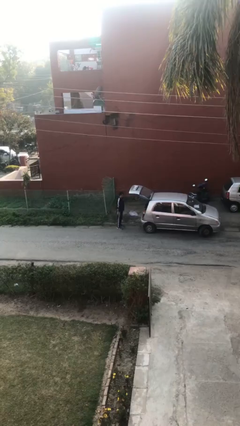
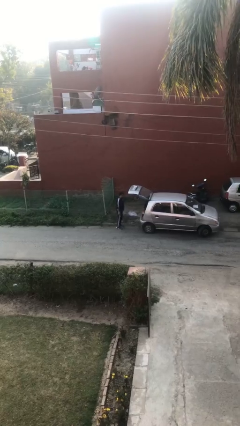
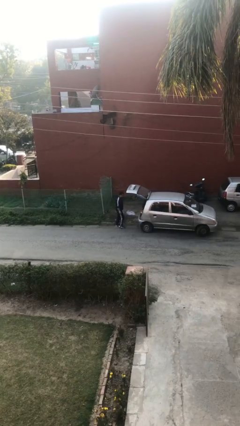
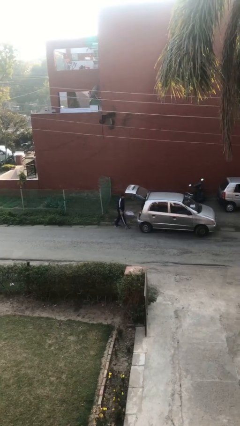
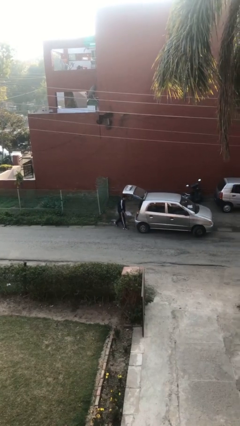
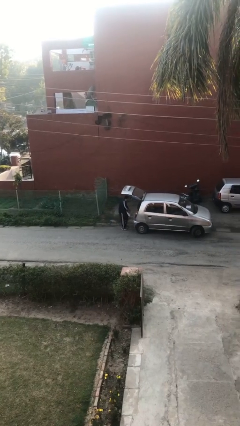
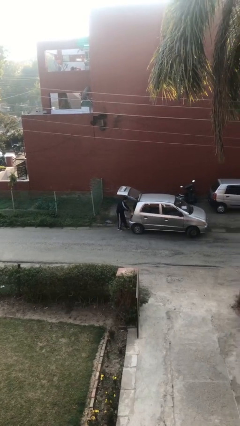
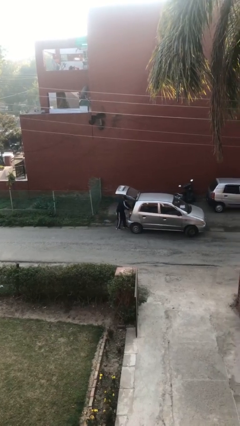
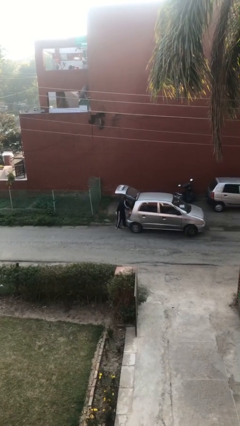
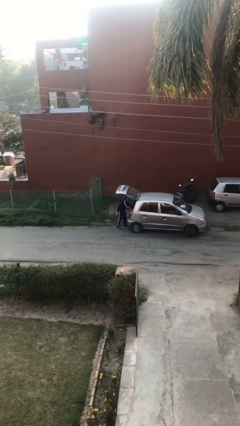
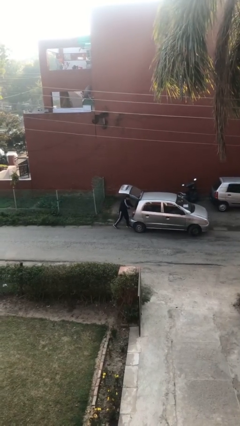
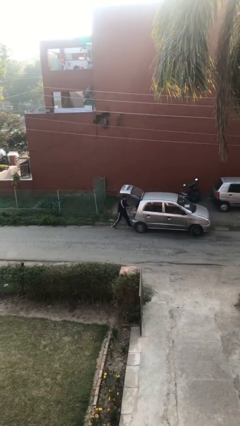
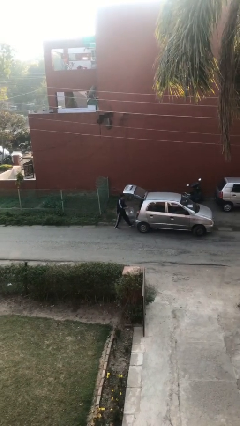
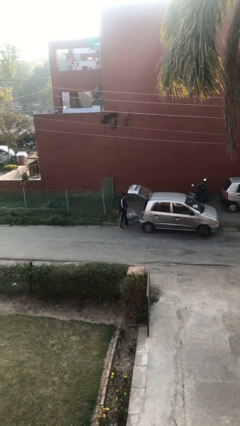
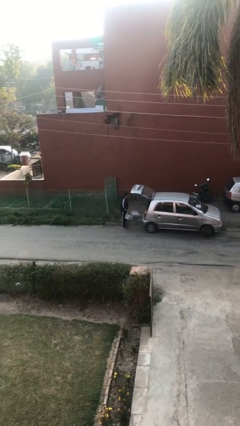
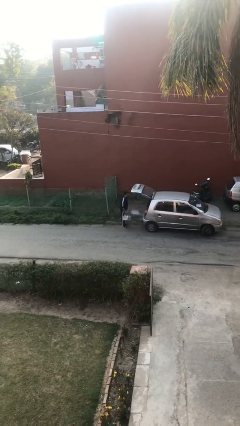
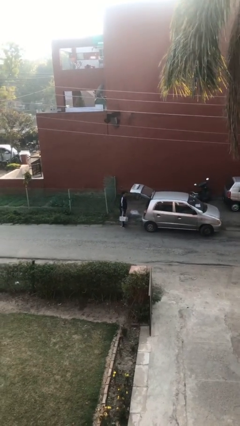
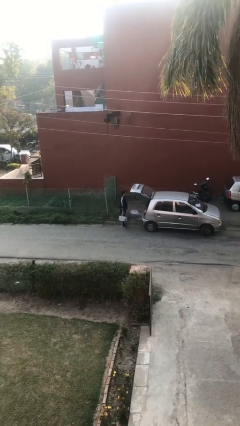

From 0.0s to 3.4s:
person unloads car

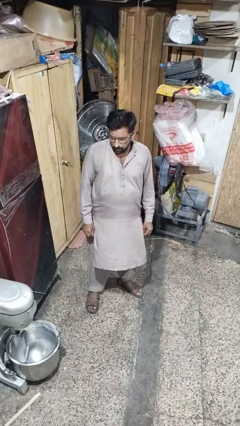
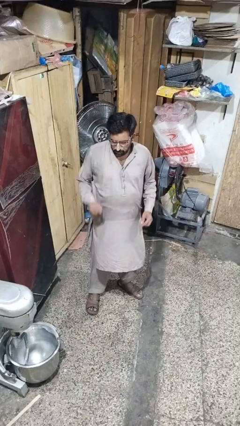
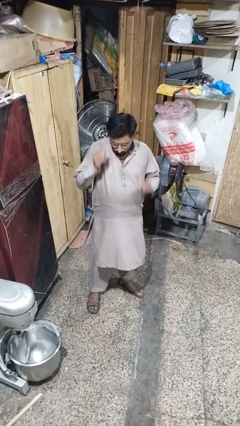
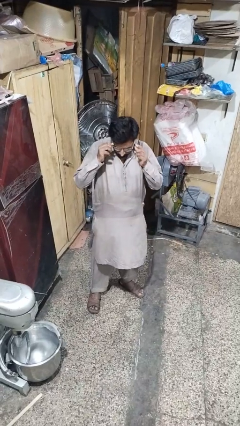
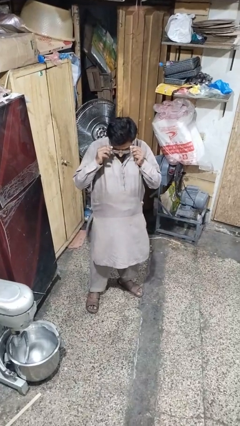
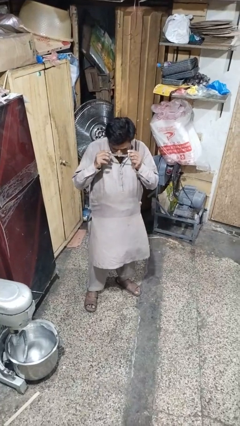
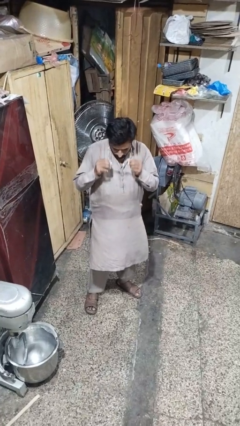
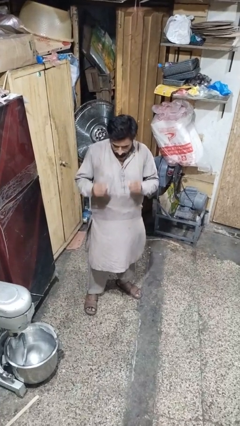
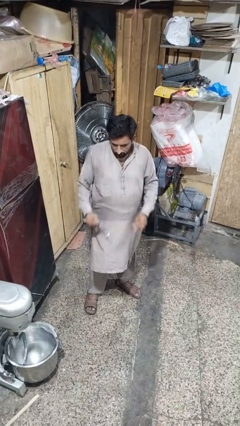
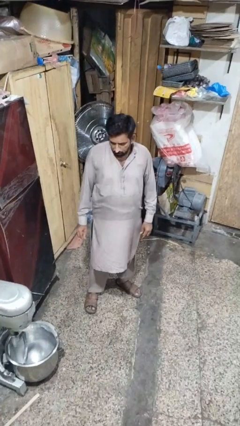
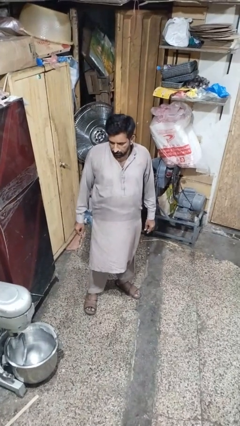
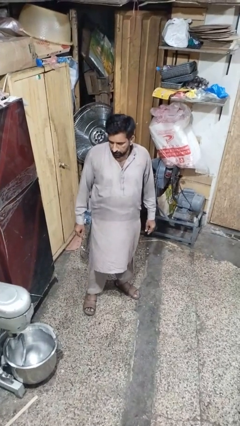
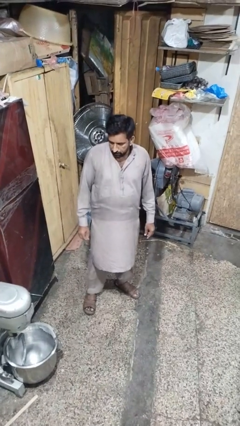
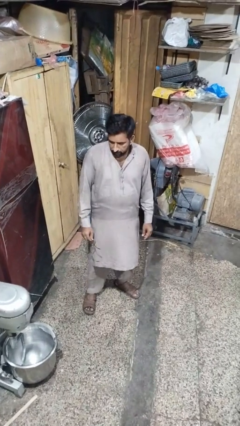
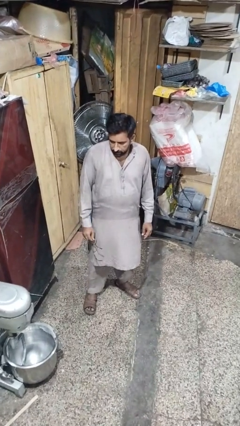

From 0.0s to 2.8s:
person takes off glasses

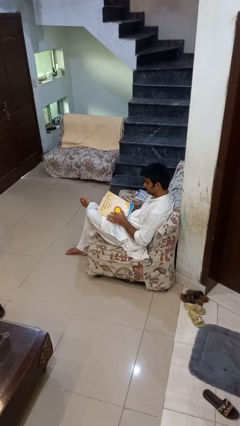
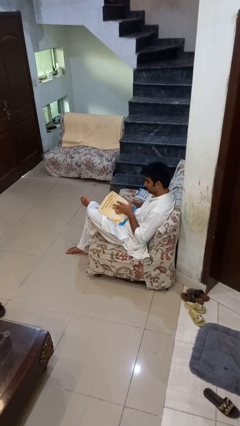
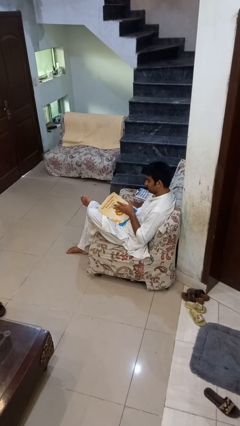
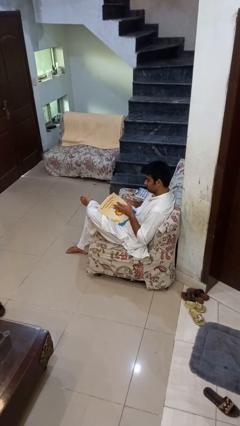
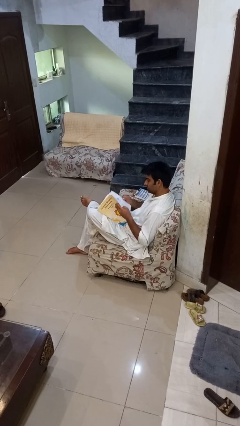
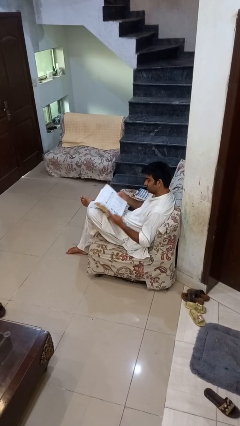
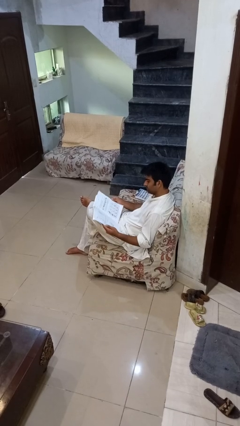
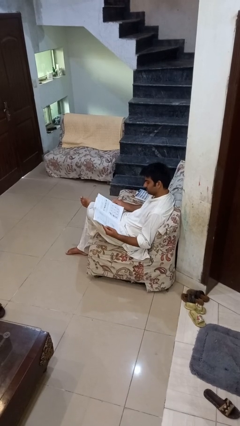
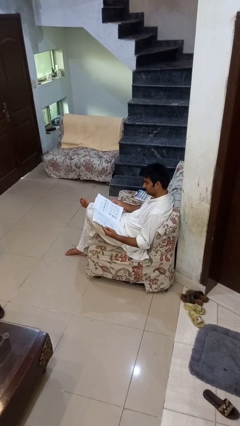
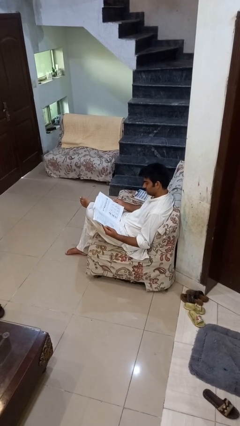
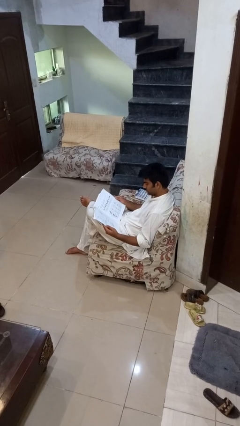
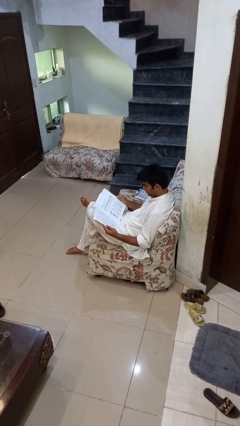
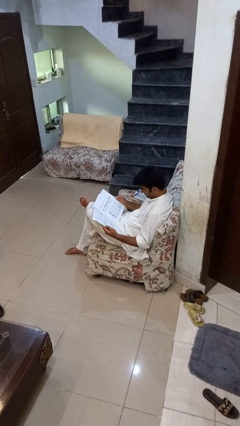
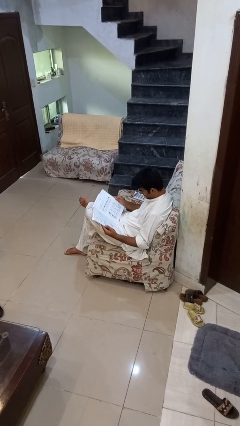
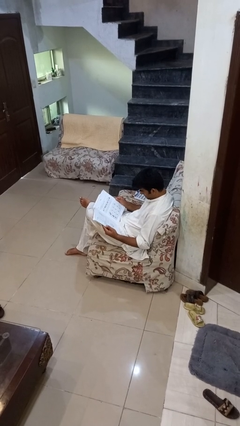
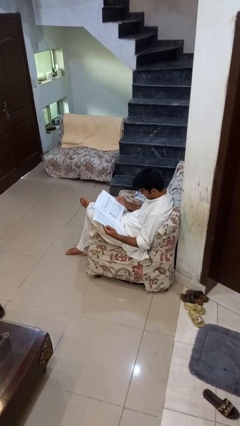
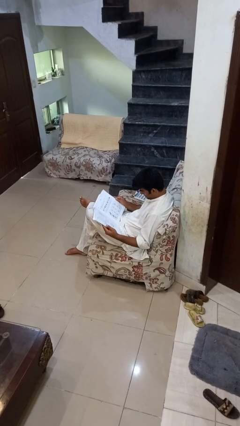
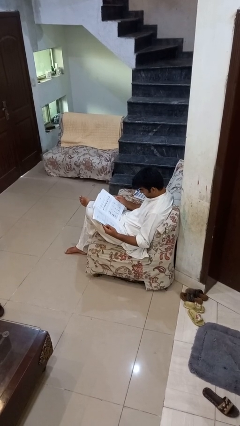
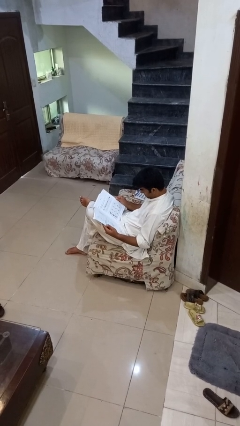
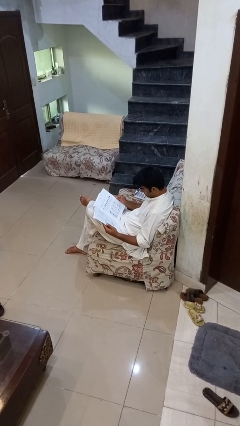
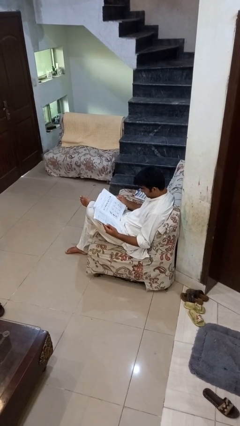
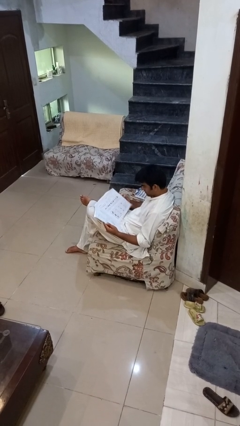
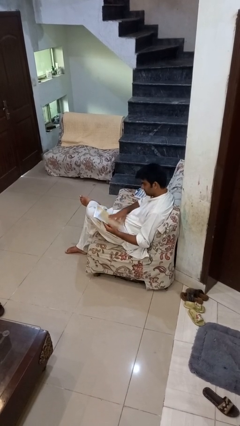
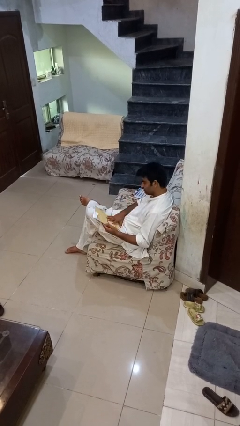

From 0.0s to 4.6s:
person reads book

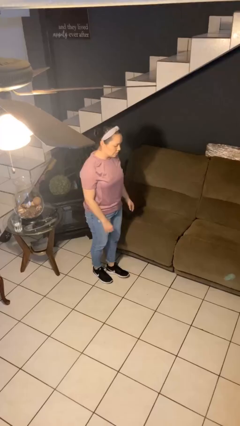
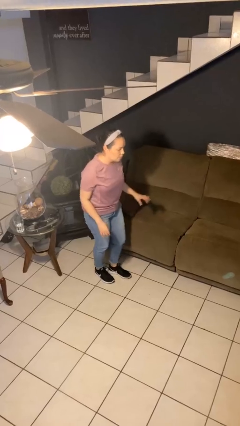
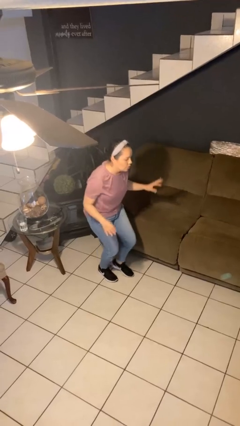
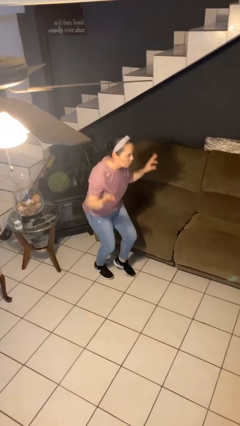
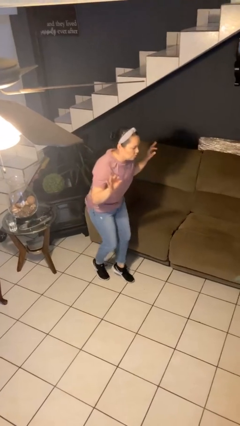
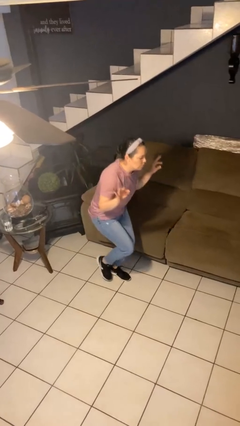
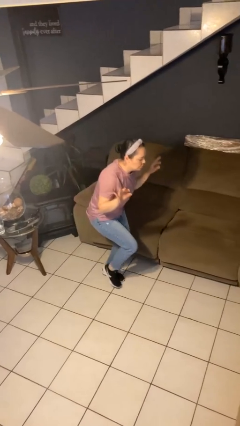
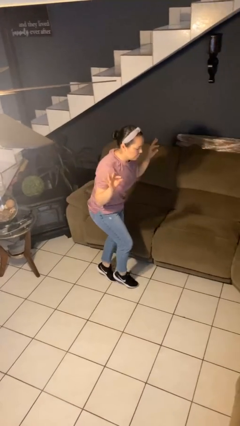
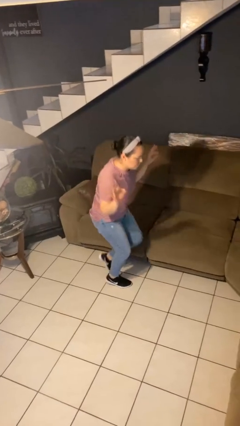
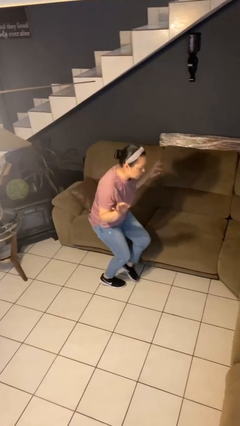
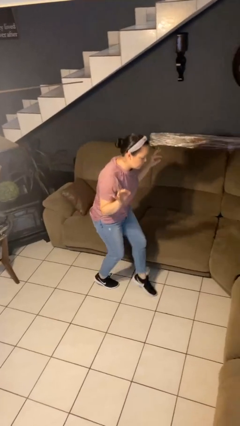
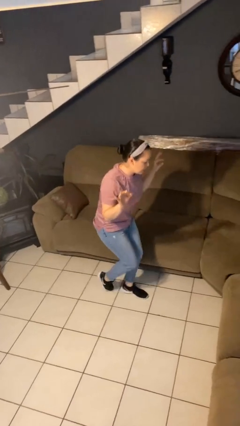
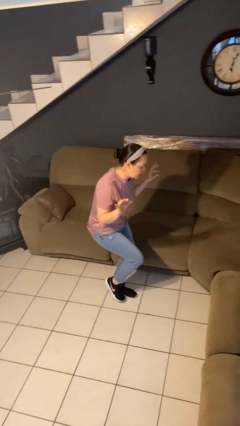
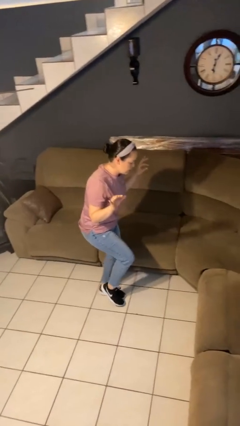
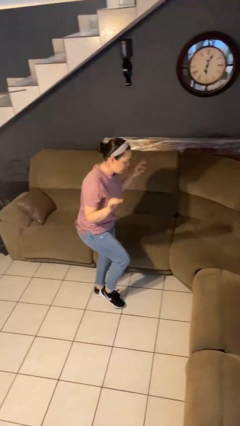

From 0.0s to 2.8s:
person walks tiptoe

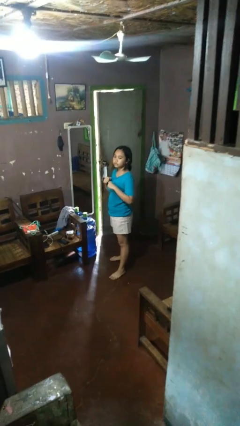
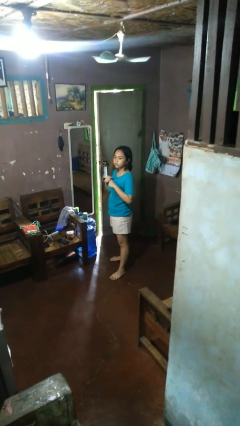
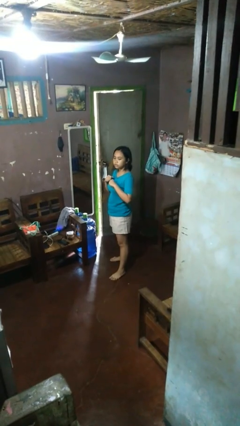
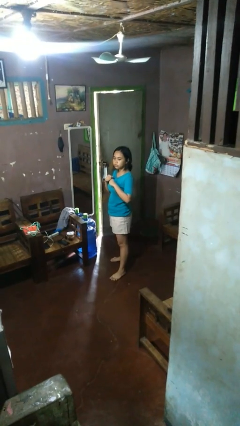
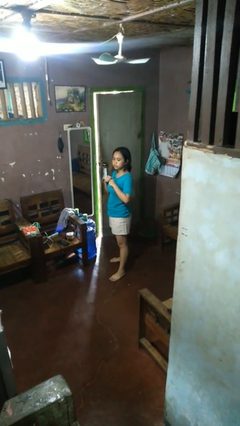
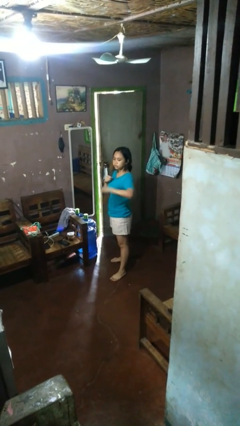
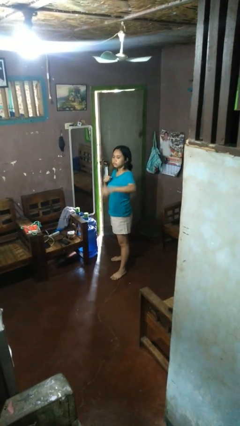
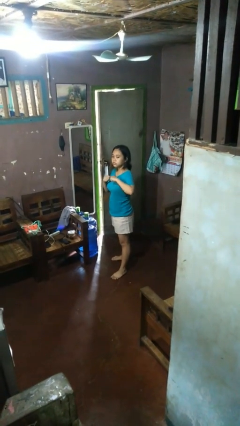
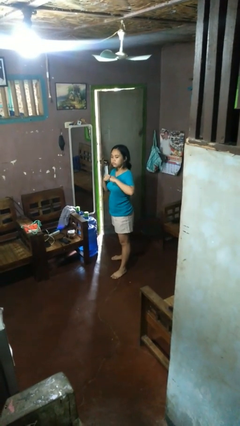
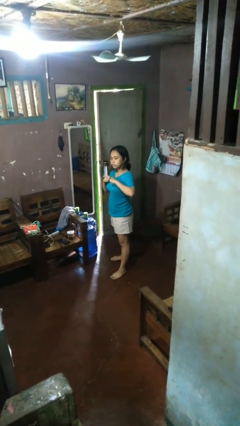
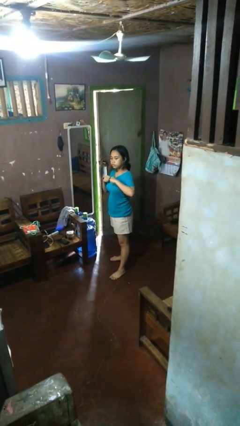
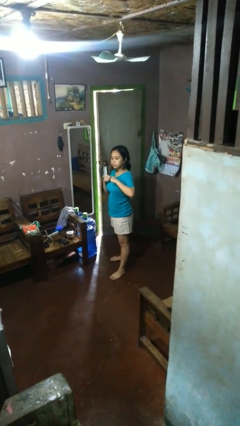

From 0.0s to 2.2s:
person karate chop

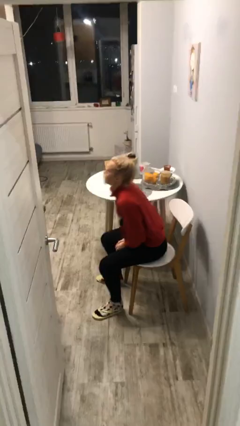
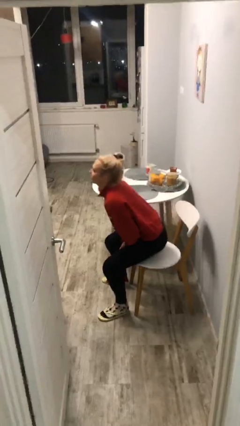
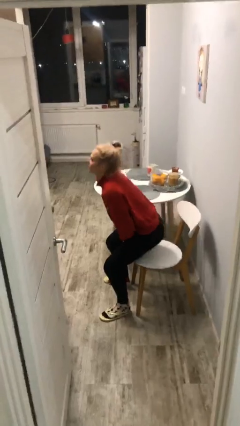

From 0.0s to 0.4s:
person stands up

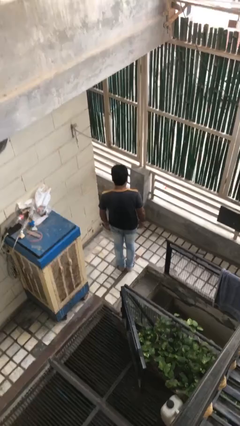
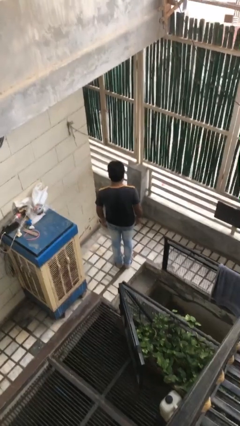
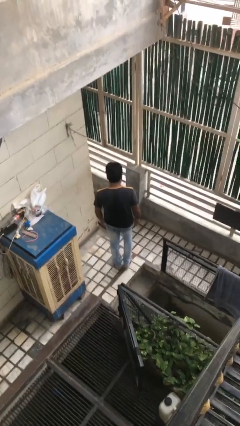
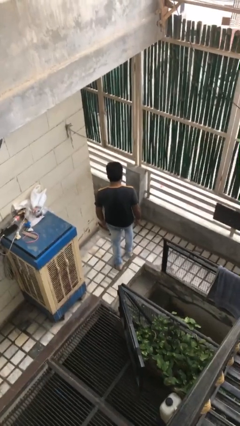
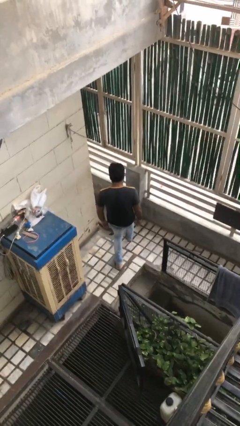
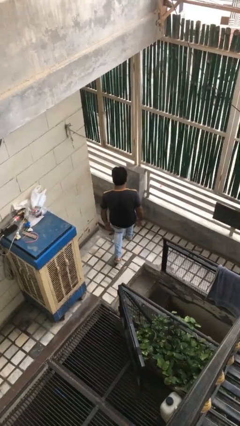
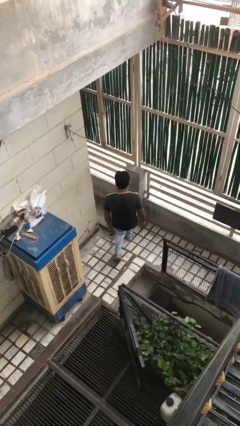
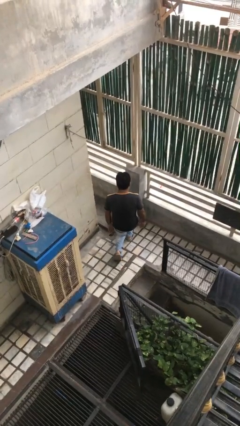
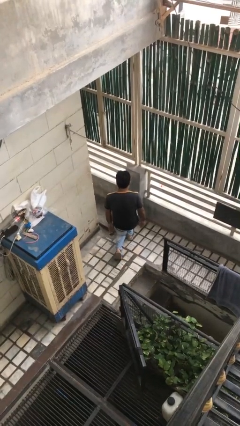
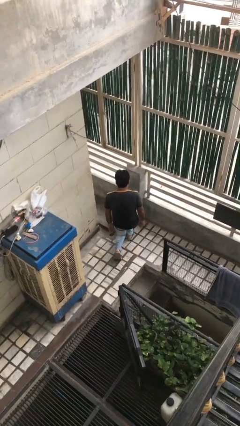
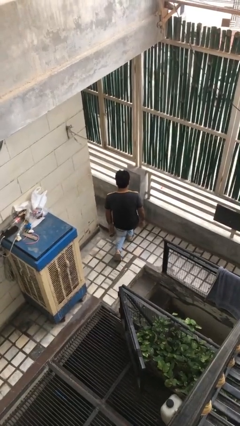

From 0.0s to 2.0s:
person kneels
